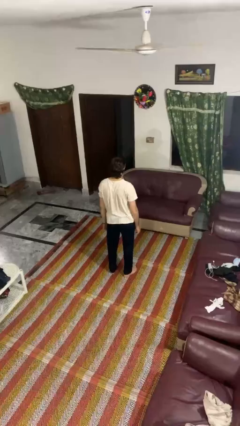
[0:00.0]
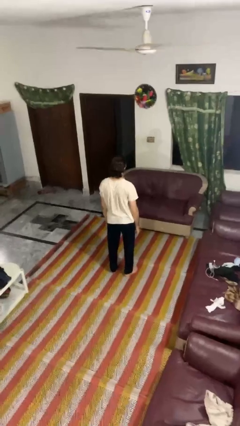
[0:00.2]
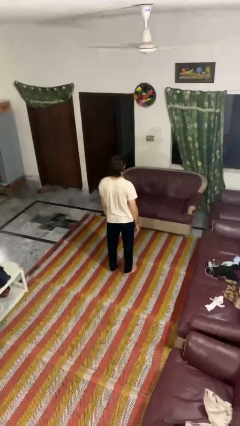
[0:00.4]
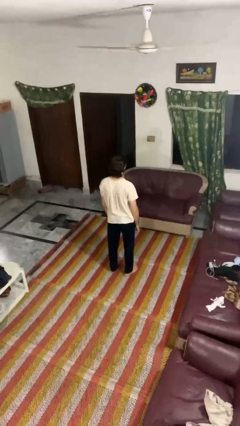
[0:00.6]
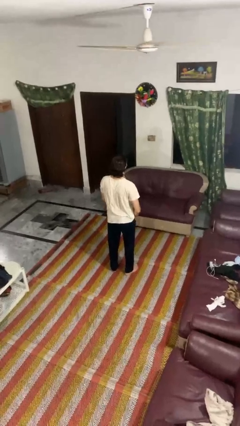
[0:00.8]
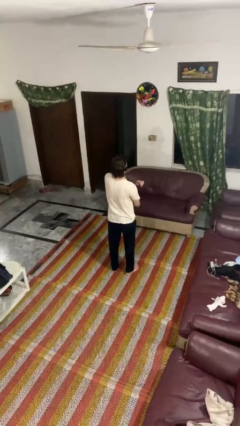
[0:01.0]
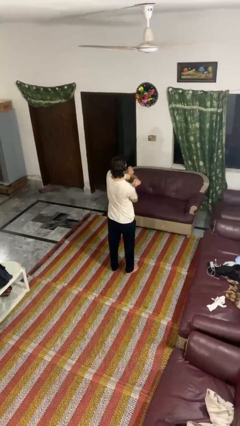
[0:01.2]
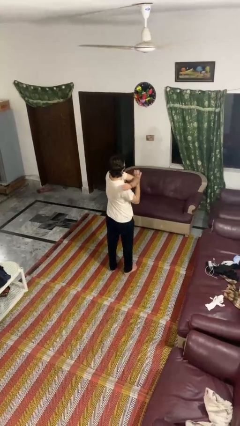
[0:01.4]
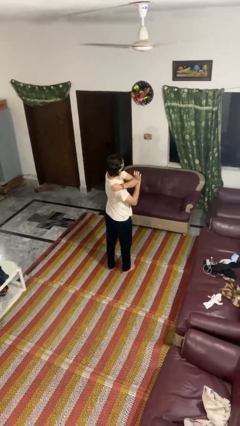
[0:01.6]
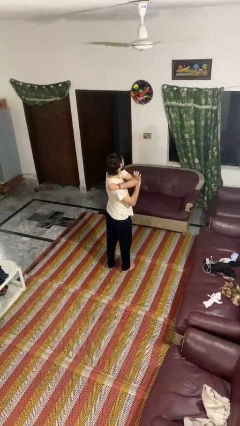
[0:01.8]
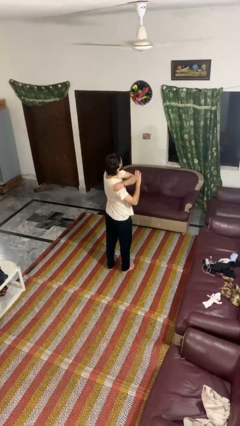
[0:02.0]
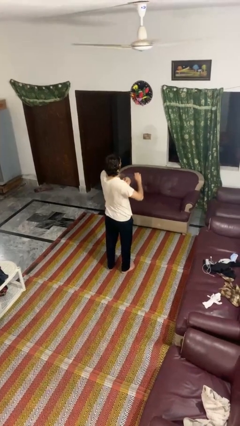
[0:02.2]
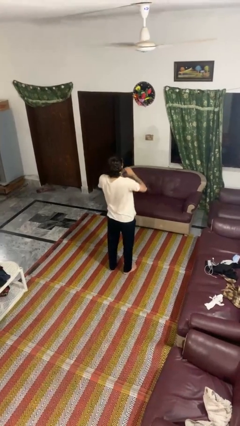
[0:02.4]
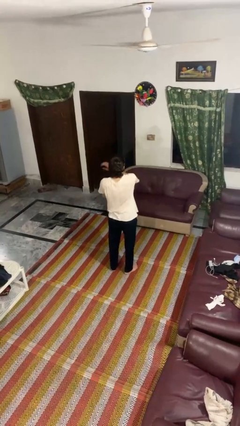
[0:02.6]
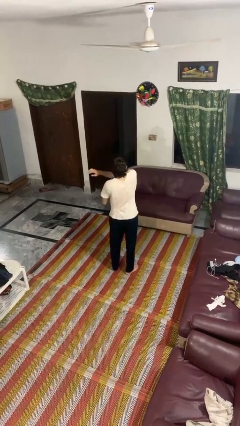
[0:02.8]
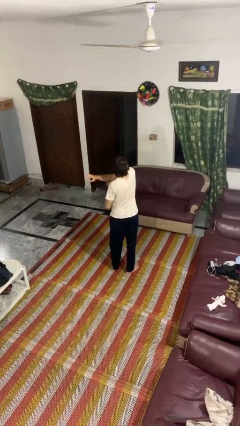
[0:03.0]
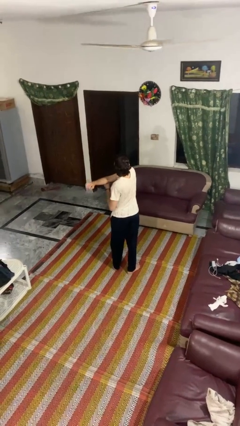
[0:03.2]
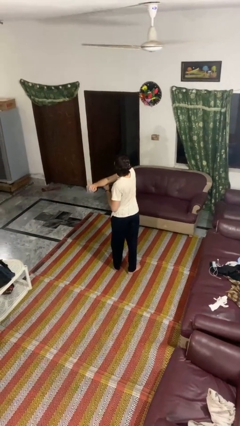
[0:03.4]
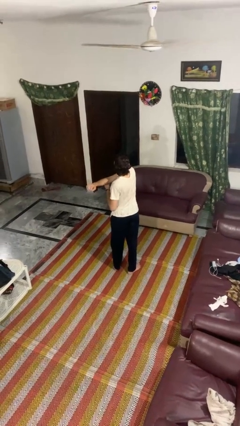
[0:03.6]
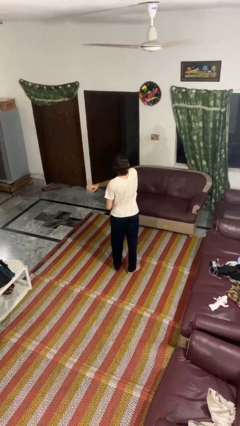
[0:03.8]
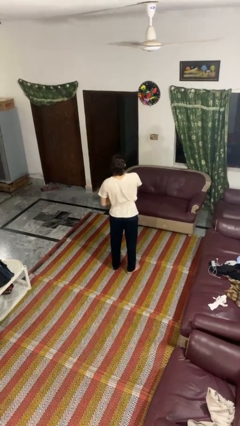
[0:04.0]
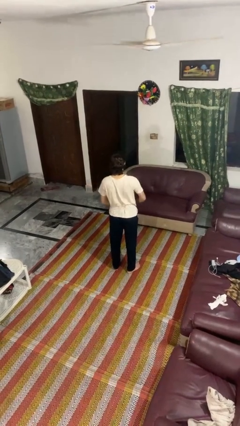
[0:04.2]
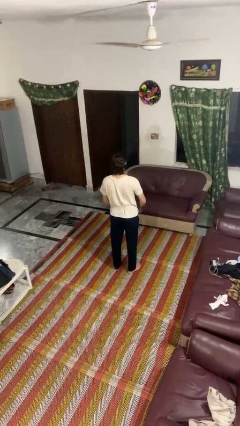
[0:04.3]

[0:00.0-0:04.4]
person stretches arms to side

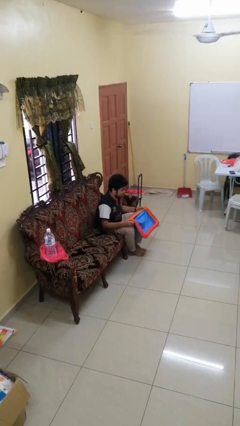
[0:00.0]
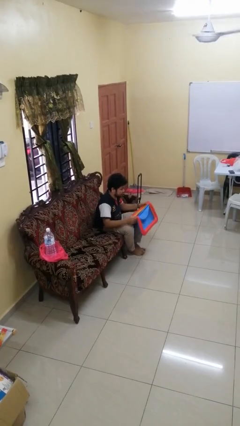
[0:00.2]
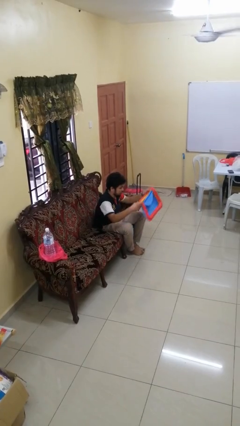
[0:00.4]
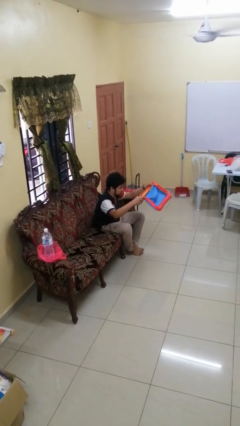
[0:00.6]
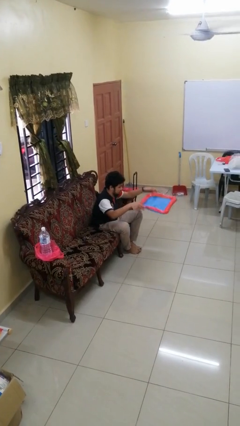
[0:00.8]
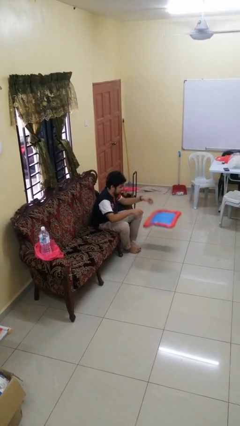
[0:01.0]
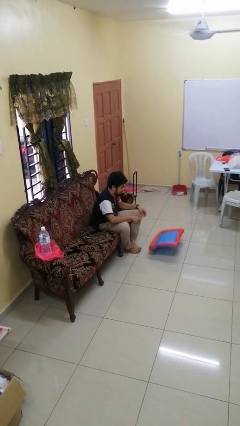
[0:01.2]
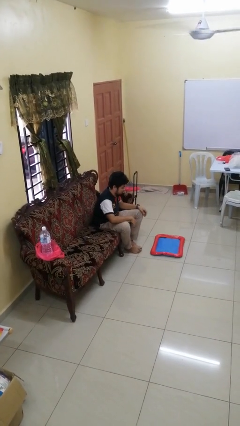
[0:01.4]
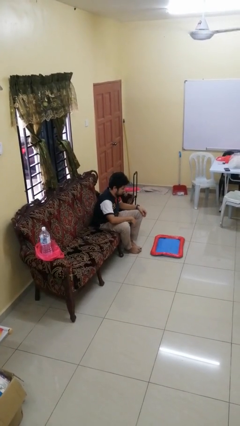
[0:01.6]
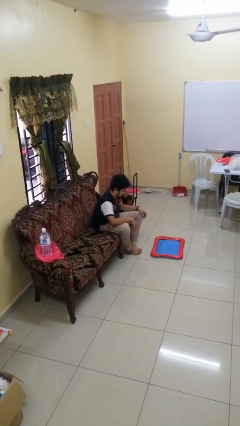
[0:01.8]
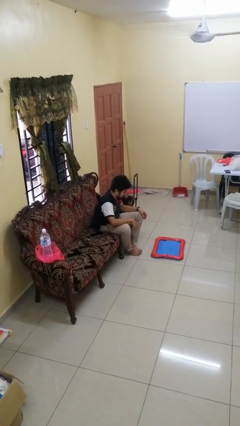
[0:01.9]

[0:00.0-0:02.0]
person drops object

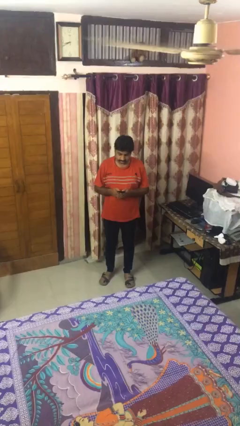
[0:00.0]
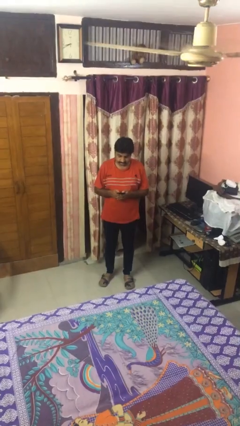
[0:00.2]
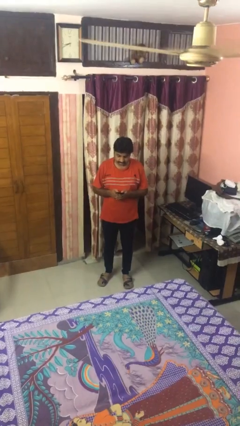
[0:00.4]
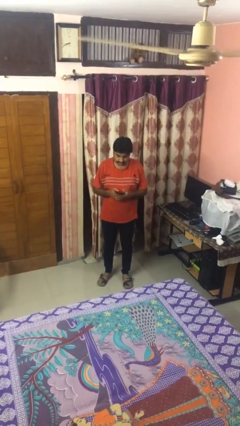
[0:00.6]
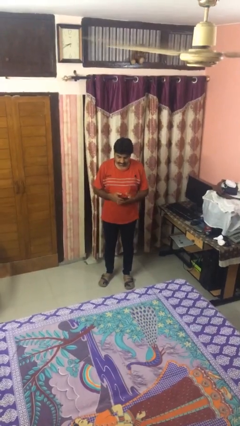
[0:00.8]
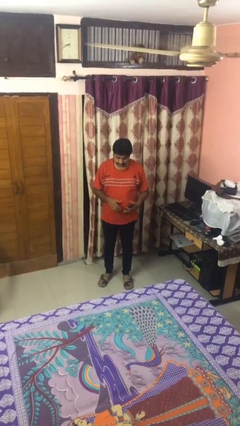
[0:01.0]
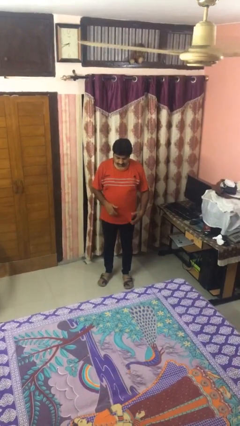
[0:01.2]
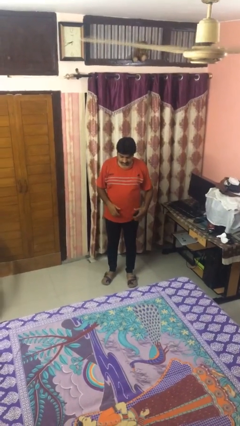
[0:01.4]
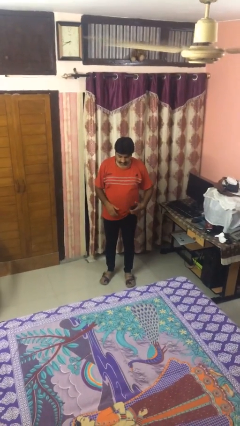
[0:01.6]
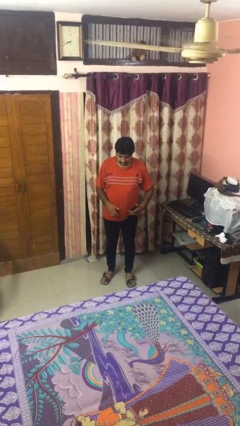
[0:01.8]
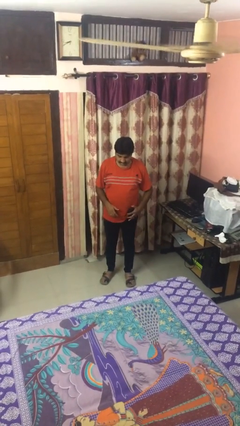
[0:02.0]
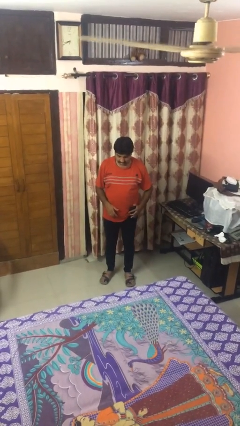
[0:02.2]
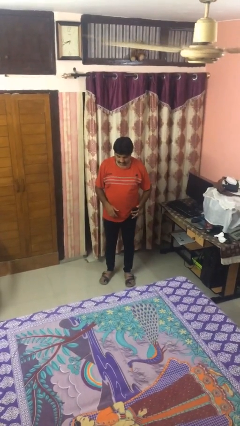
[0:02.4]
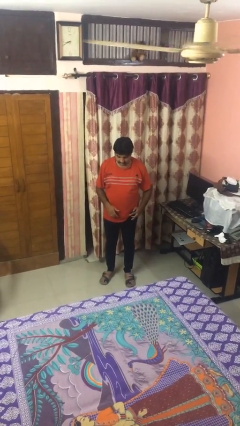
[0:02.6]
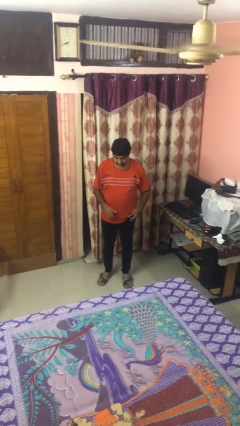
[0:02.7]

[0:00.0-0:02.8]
person puts phone into pocket

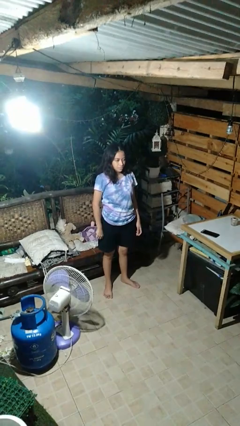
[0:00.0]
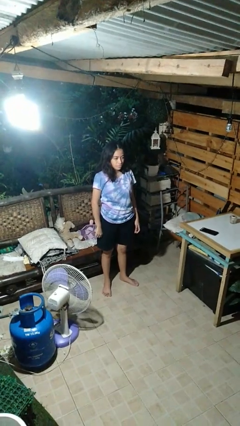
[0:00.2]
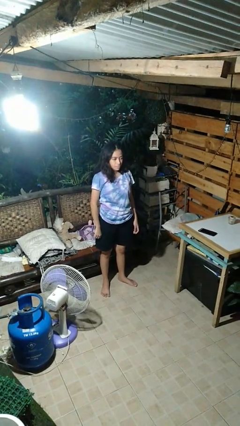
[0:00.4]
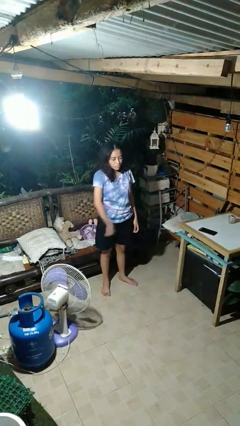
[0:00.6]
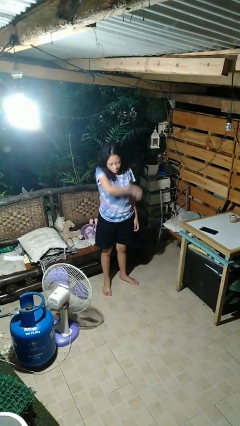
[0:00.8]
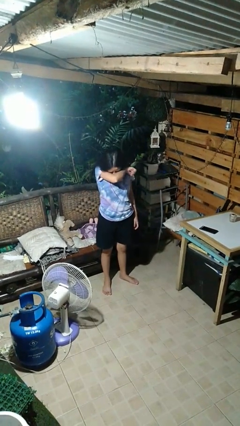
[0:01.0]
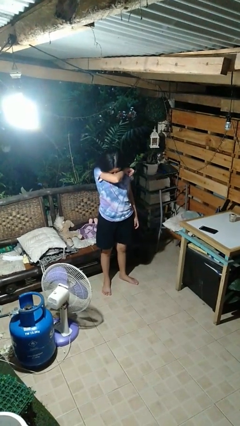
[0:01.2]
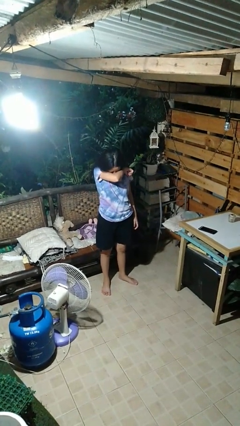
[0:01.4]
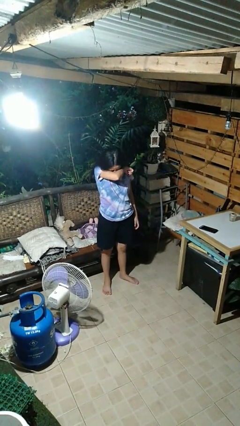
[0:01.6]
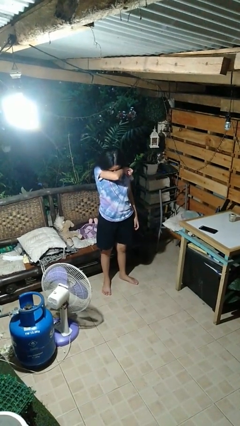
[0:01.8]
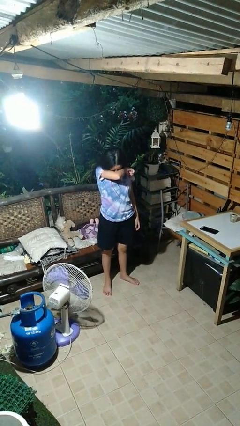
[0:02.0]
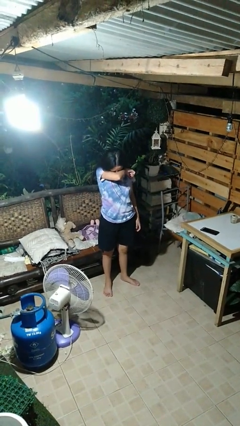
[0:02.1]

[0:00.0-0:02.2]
person sneezes into arm

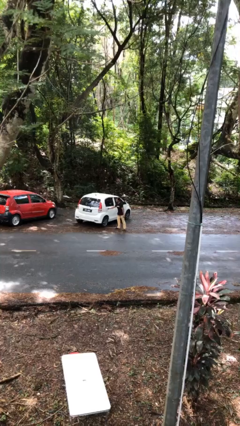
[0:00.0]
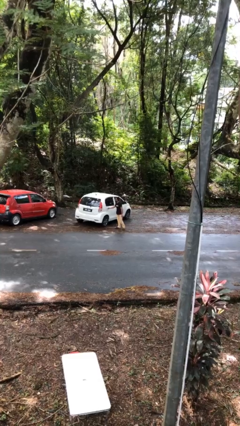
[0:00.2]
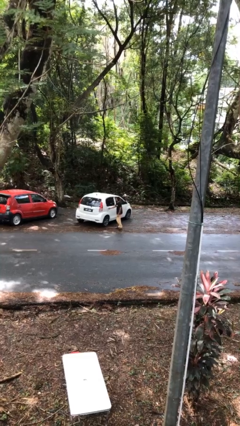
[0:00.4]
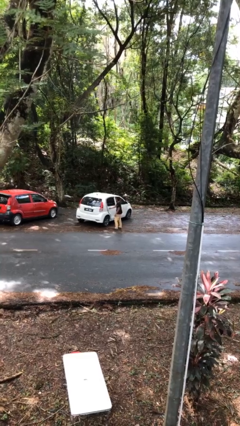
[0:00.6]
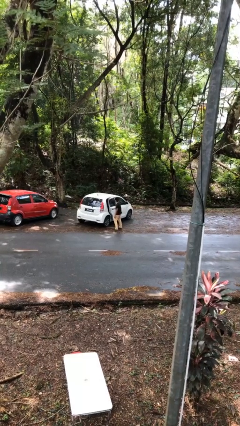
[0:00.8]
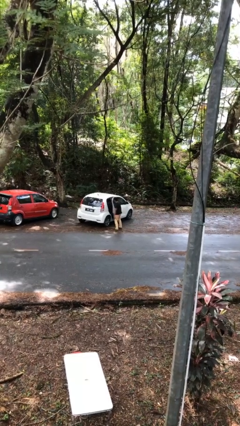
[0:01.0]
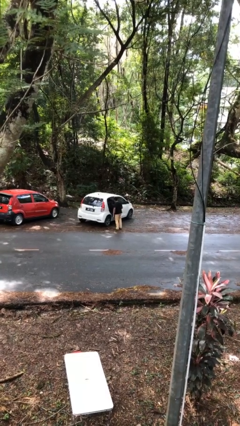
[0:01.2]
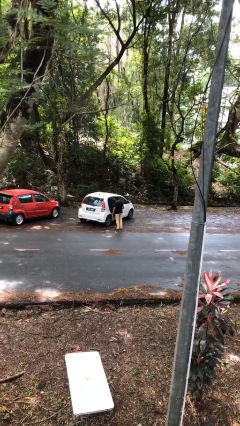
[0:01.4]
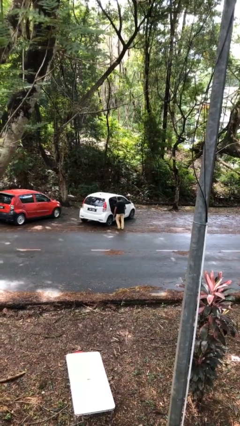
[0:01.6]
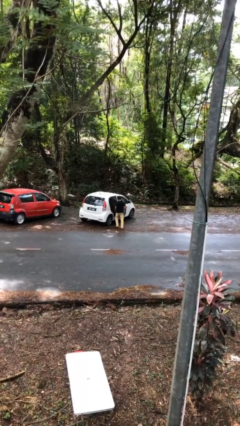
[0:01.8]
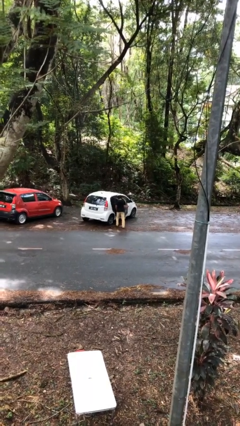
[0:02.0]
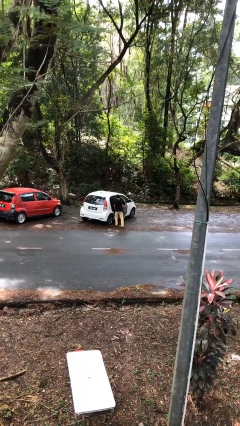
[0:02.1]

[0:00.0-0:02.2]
person opens car door

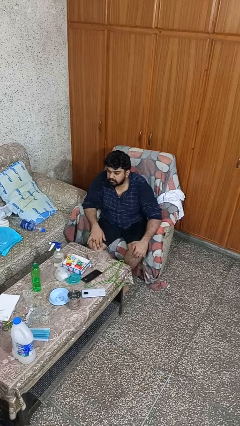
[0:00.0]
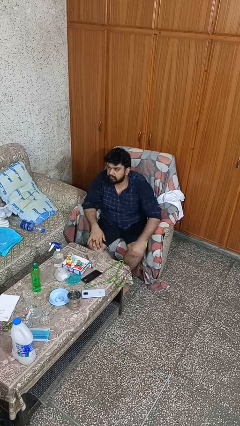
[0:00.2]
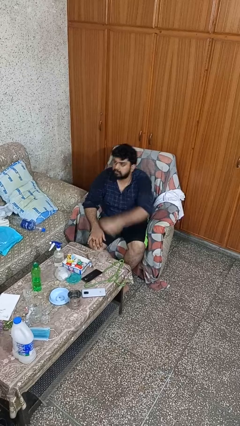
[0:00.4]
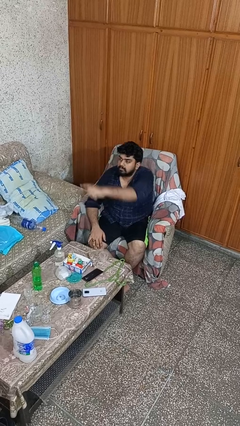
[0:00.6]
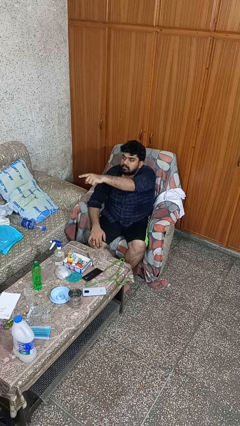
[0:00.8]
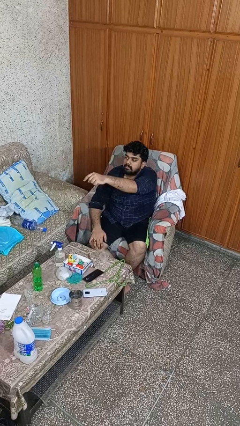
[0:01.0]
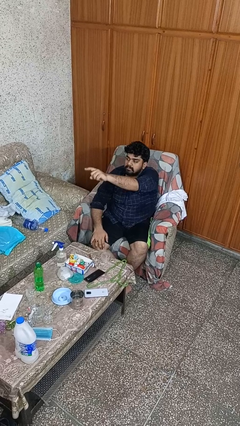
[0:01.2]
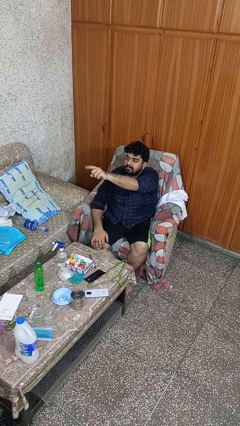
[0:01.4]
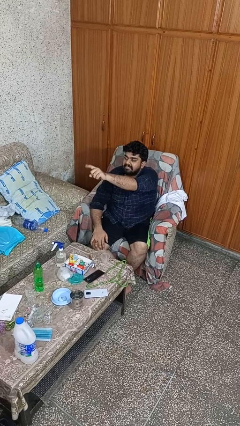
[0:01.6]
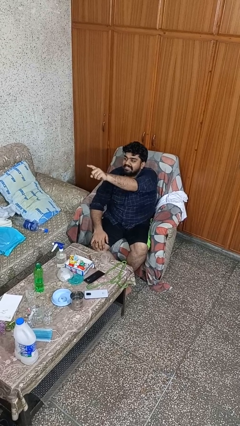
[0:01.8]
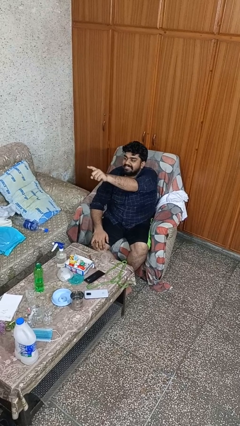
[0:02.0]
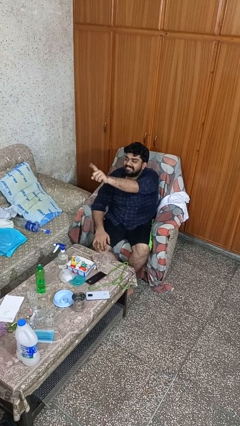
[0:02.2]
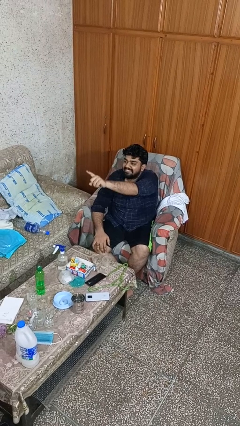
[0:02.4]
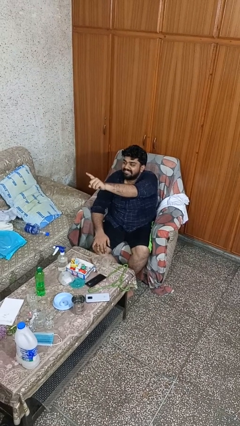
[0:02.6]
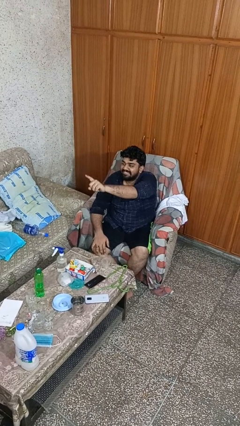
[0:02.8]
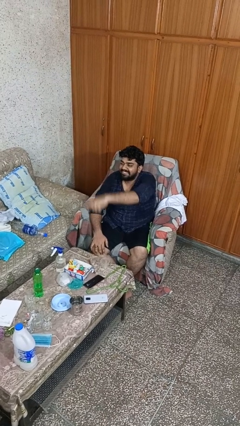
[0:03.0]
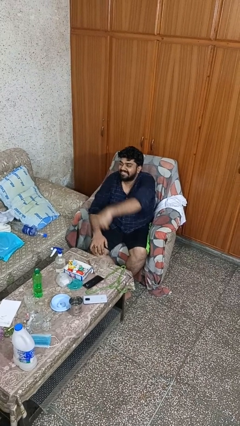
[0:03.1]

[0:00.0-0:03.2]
person points at person
